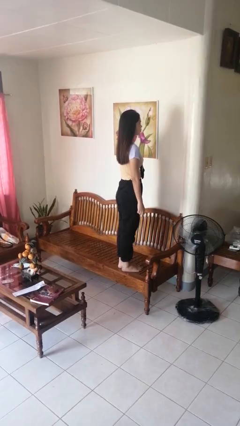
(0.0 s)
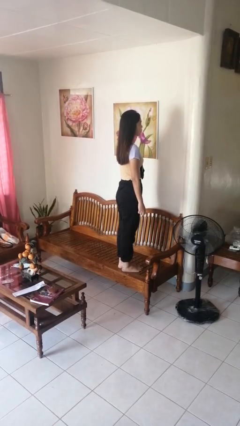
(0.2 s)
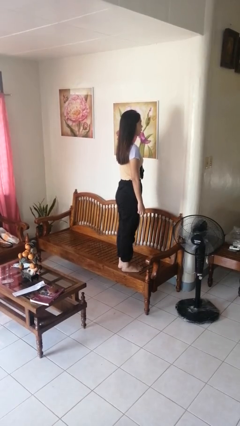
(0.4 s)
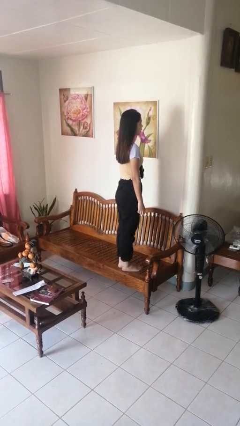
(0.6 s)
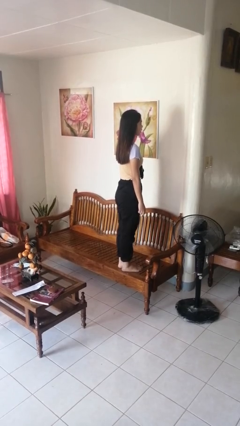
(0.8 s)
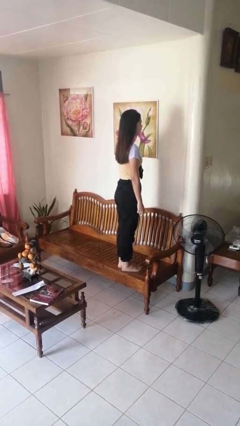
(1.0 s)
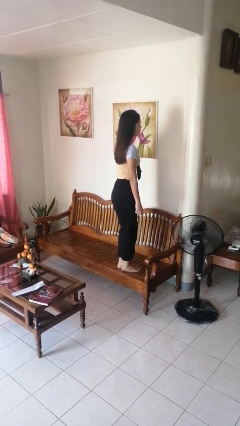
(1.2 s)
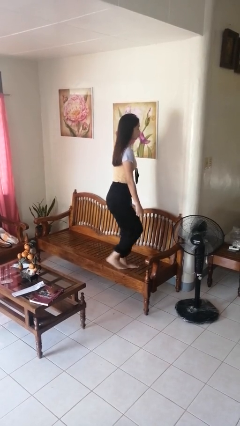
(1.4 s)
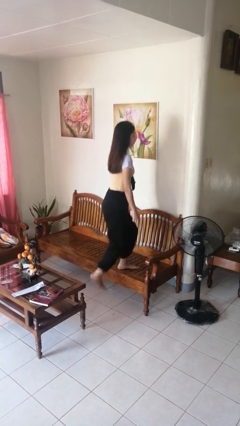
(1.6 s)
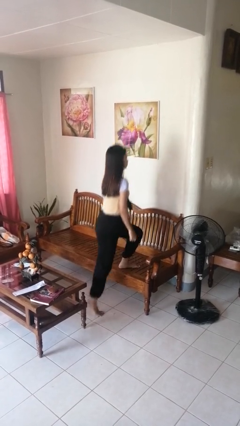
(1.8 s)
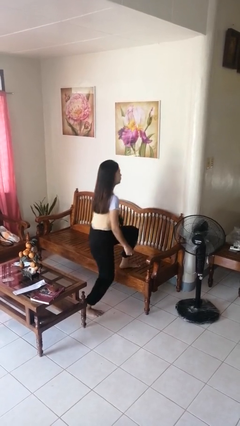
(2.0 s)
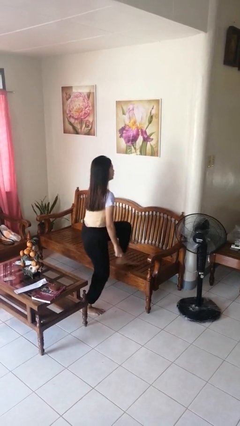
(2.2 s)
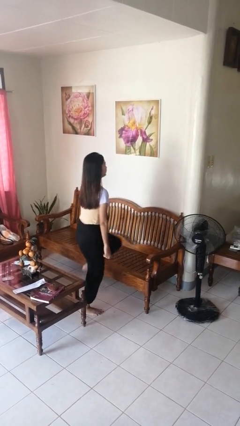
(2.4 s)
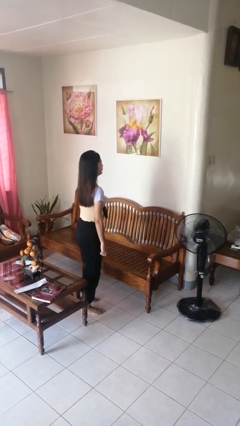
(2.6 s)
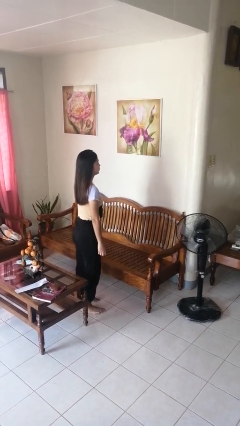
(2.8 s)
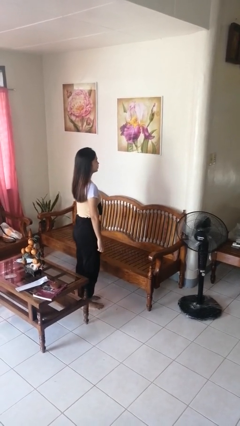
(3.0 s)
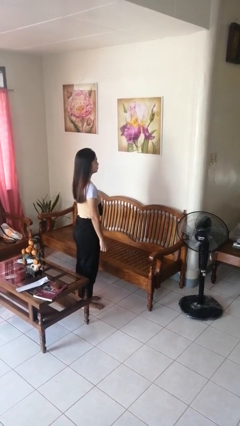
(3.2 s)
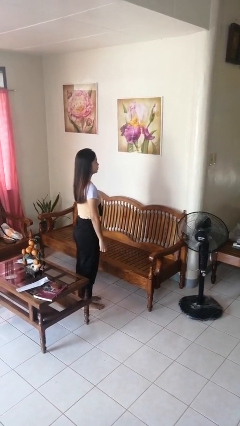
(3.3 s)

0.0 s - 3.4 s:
person climbs off chair

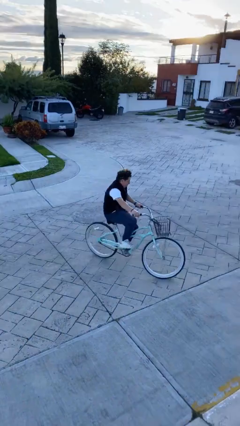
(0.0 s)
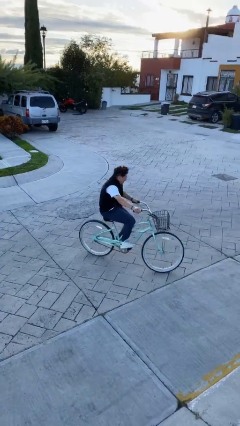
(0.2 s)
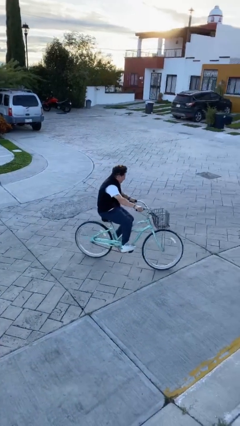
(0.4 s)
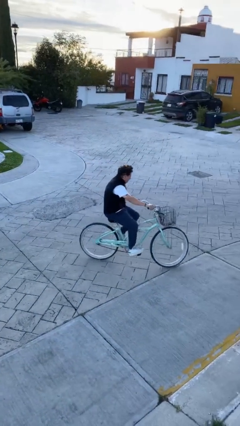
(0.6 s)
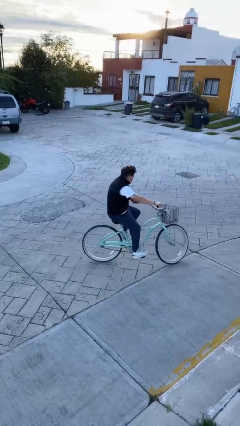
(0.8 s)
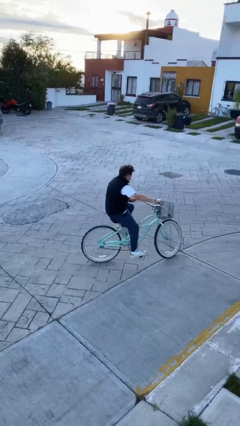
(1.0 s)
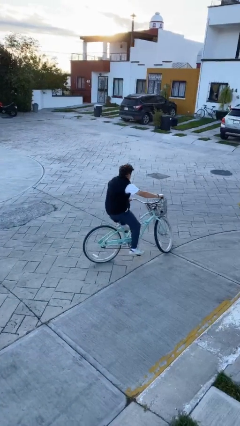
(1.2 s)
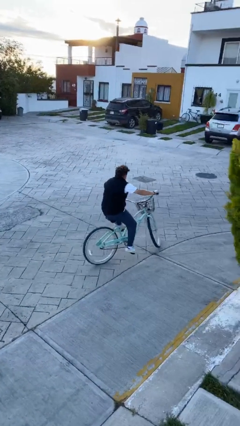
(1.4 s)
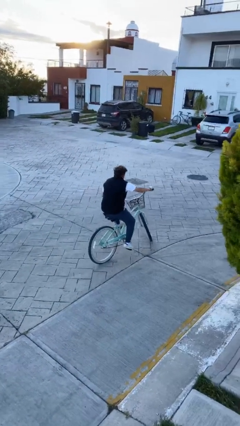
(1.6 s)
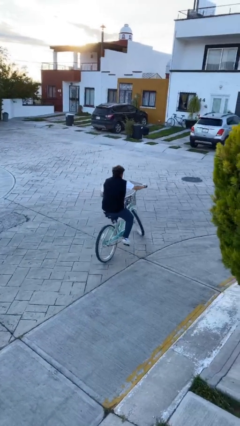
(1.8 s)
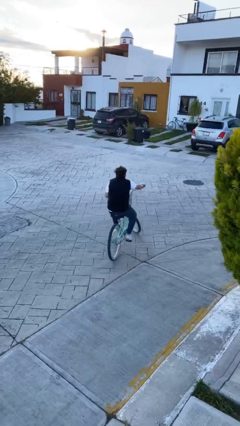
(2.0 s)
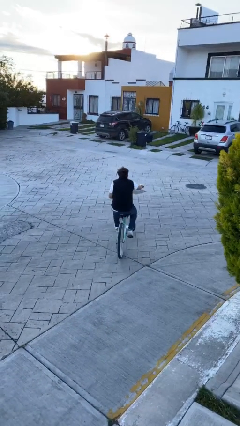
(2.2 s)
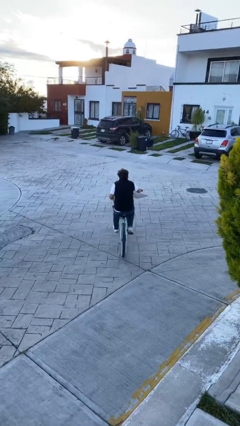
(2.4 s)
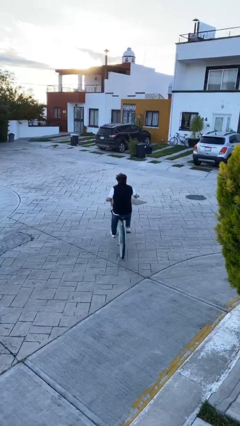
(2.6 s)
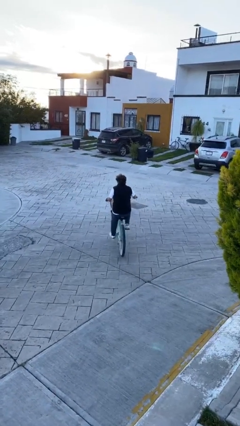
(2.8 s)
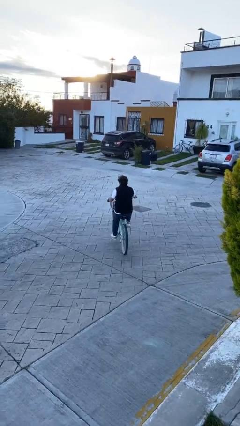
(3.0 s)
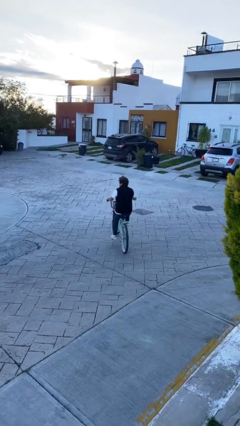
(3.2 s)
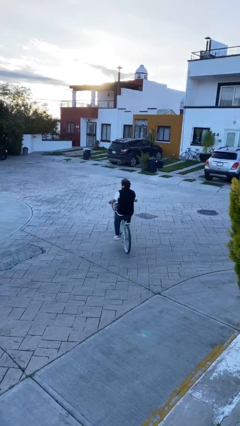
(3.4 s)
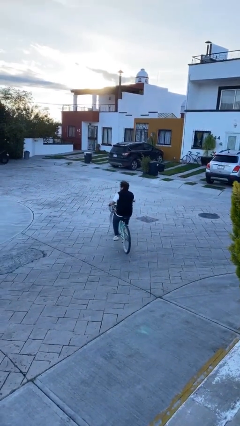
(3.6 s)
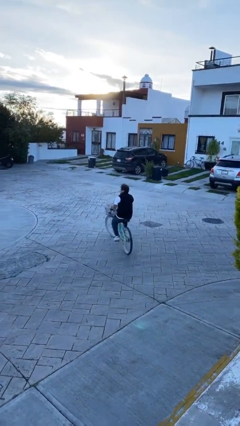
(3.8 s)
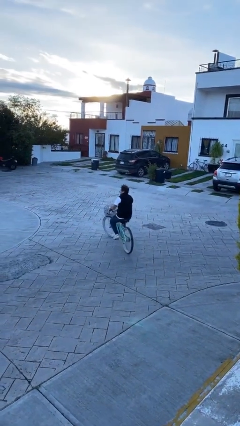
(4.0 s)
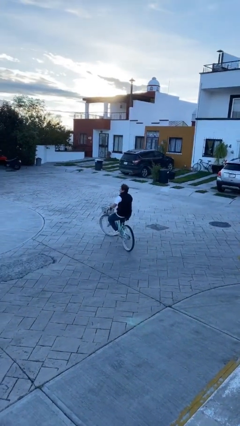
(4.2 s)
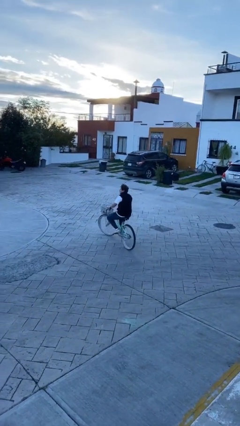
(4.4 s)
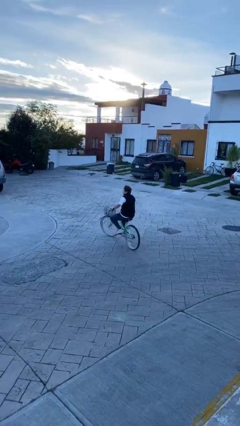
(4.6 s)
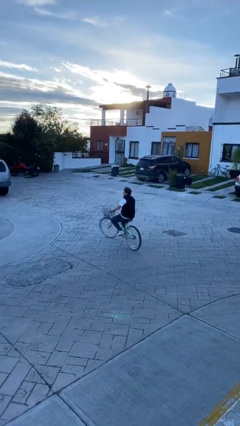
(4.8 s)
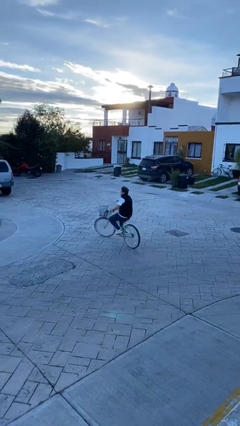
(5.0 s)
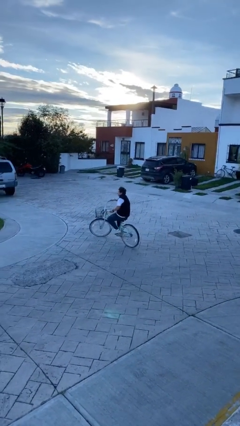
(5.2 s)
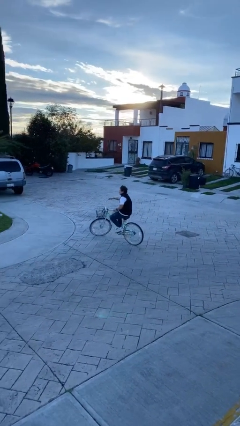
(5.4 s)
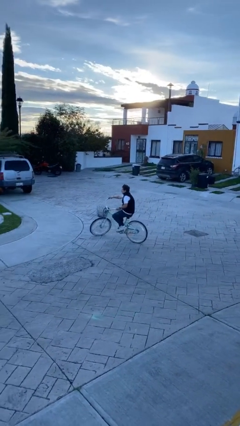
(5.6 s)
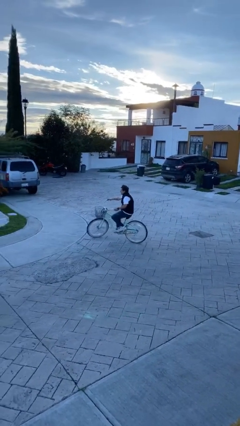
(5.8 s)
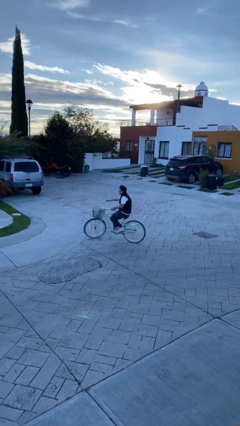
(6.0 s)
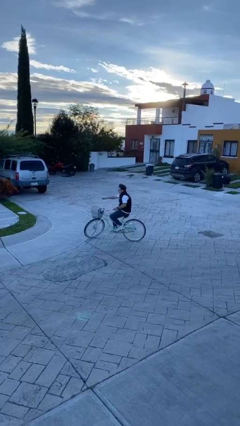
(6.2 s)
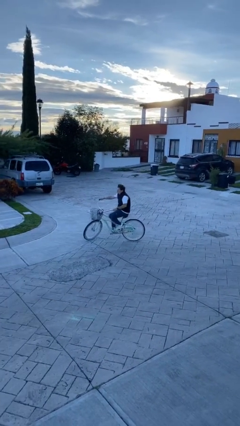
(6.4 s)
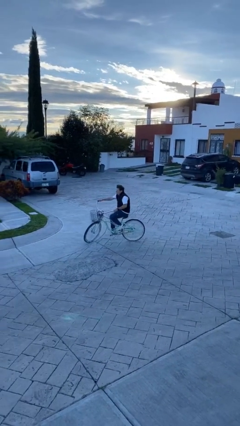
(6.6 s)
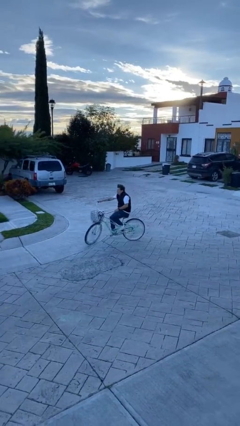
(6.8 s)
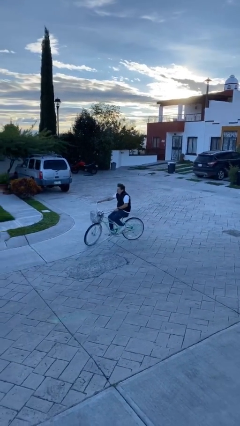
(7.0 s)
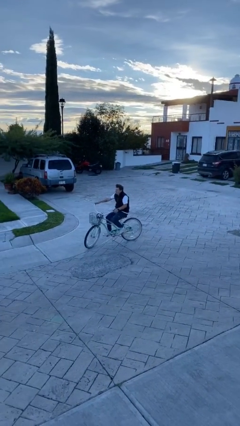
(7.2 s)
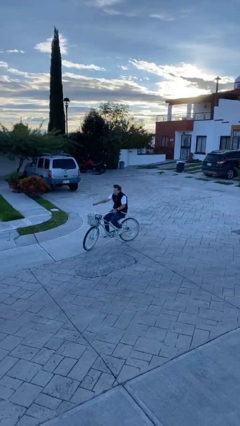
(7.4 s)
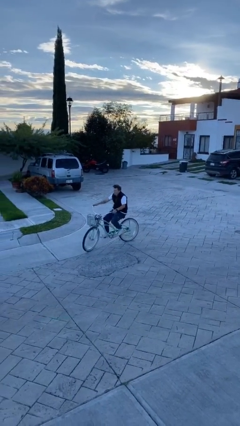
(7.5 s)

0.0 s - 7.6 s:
person rides bicycle

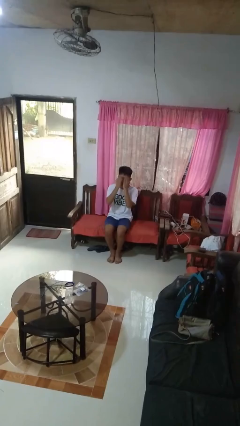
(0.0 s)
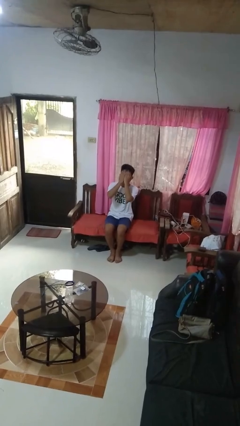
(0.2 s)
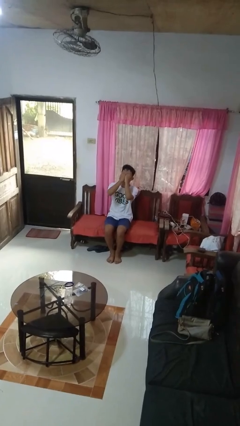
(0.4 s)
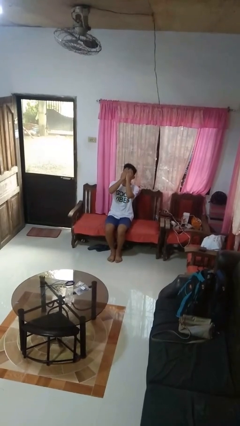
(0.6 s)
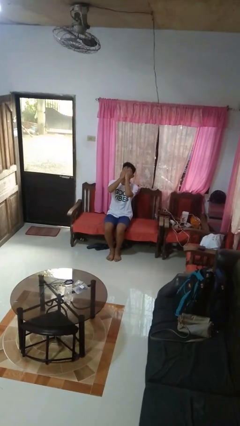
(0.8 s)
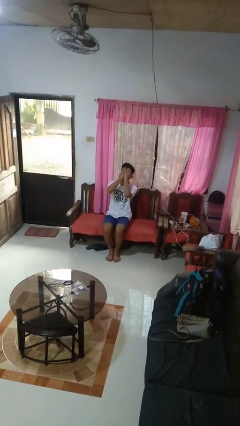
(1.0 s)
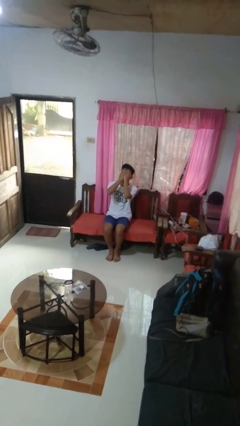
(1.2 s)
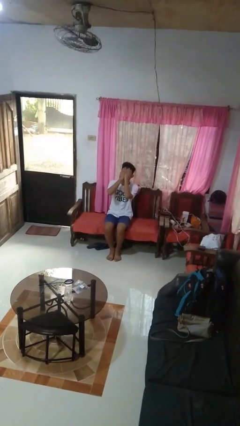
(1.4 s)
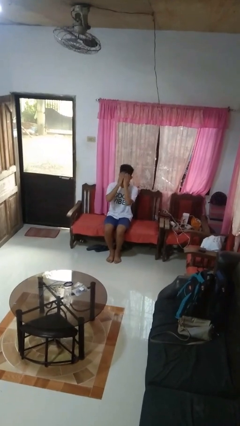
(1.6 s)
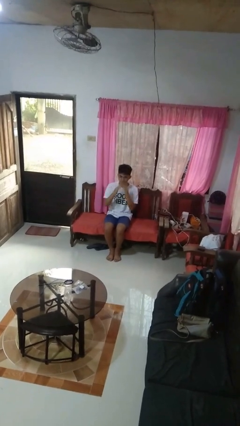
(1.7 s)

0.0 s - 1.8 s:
person covers face with hands

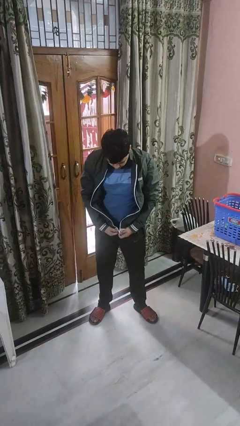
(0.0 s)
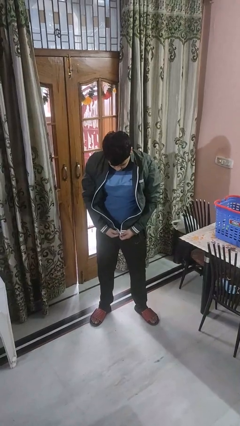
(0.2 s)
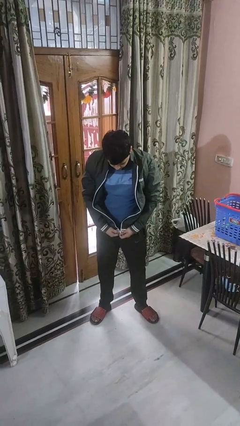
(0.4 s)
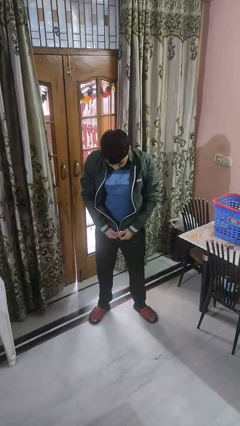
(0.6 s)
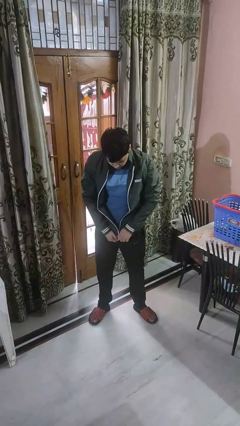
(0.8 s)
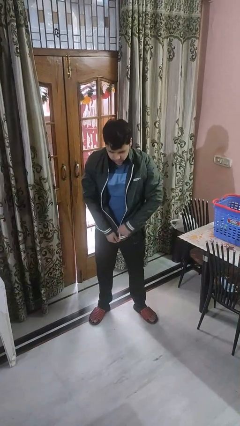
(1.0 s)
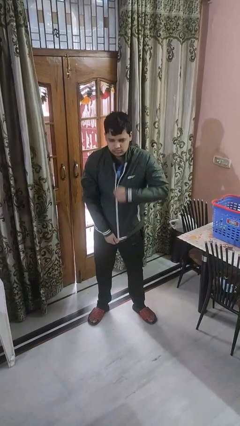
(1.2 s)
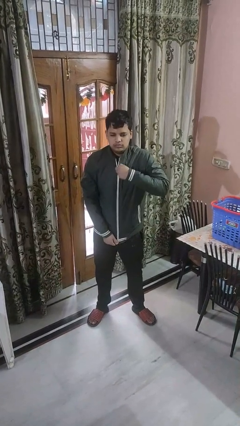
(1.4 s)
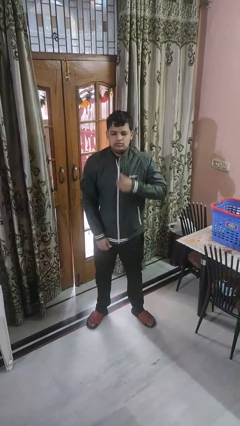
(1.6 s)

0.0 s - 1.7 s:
person zips up jacket

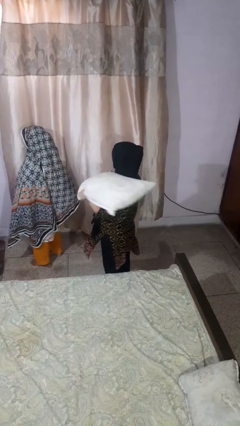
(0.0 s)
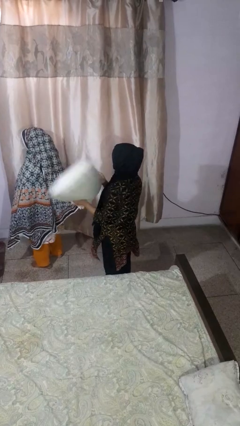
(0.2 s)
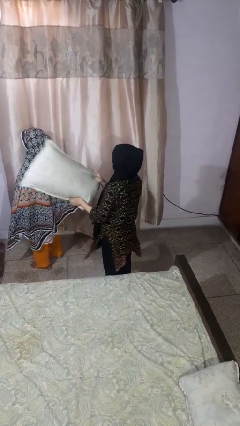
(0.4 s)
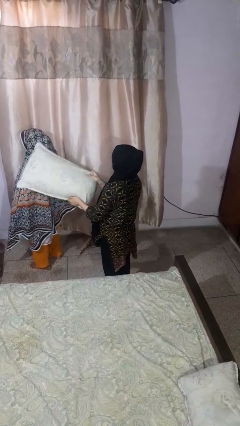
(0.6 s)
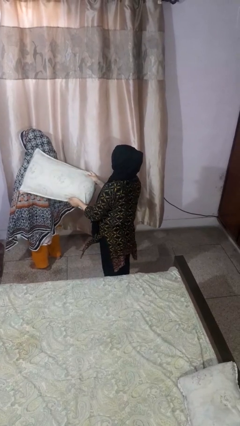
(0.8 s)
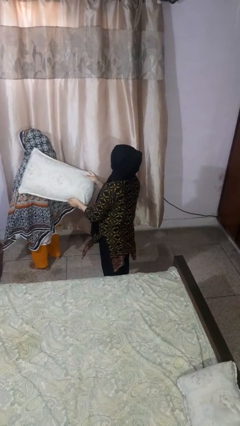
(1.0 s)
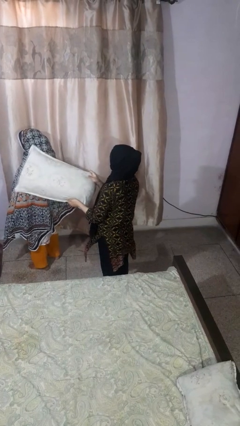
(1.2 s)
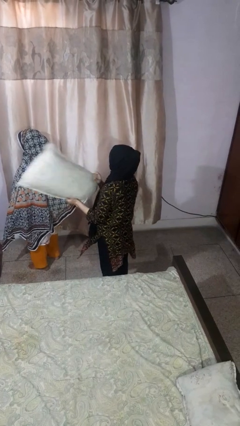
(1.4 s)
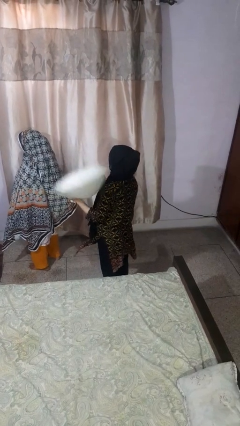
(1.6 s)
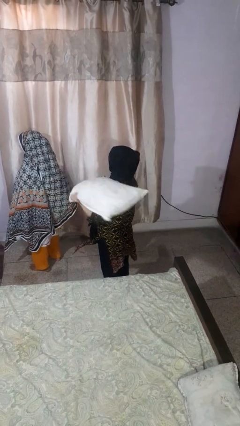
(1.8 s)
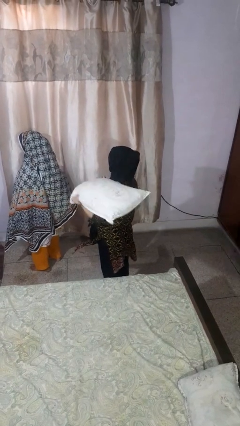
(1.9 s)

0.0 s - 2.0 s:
person hits person with pillow

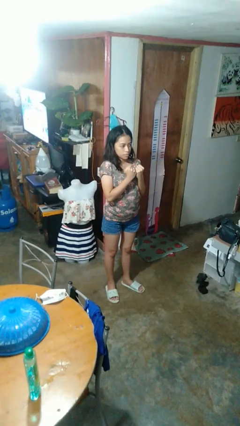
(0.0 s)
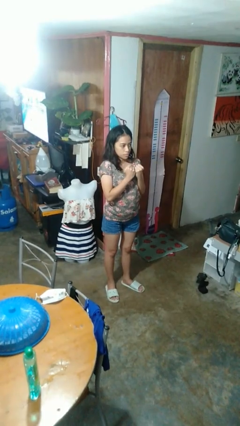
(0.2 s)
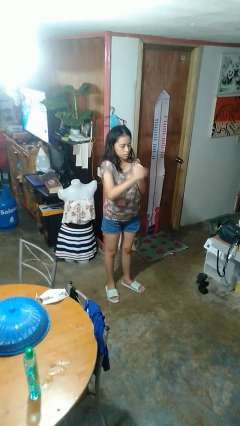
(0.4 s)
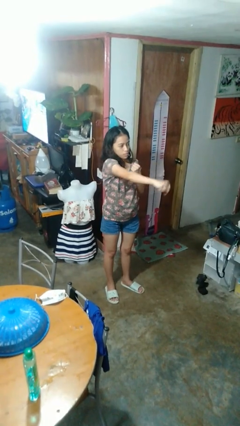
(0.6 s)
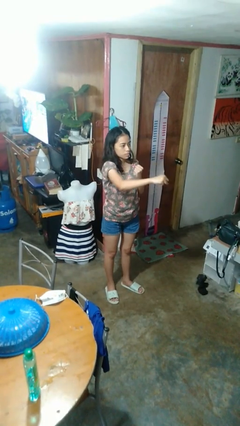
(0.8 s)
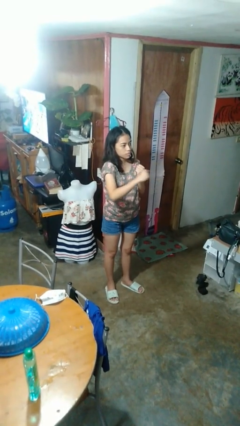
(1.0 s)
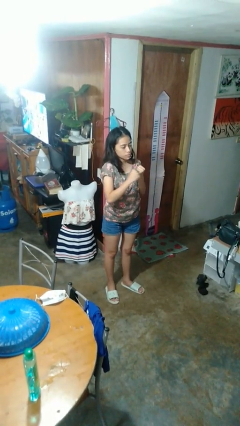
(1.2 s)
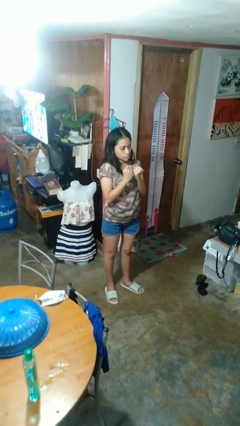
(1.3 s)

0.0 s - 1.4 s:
person punches
